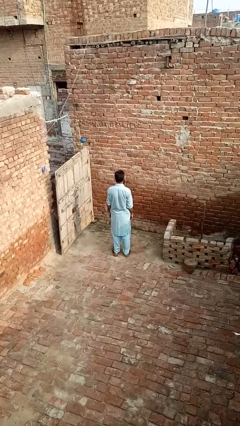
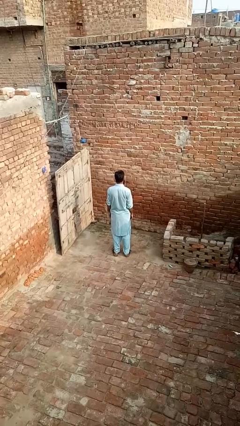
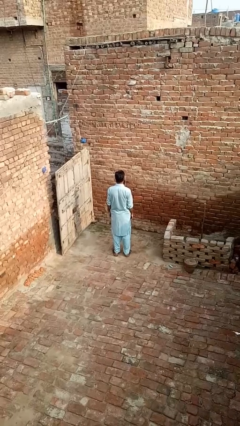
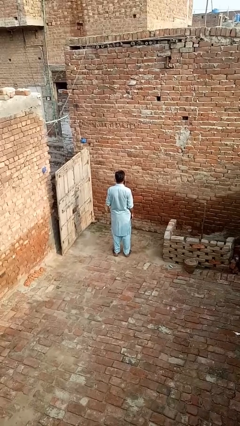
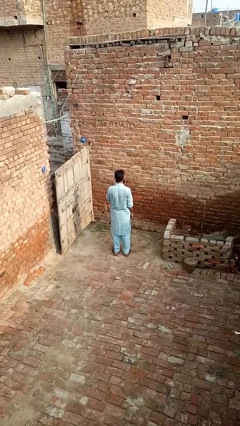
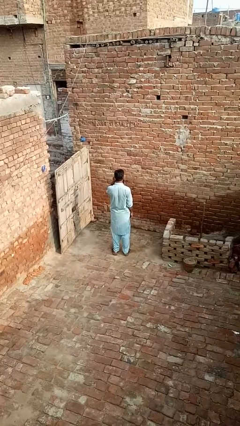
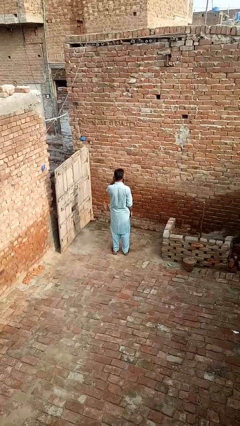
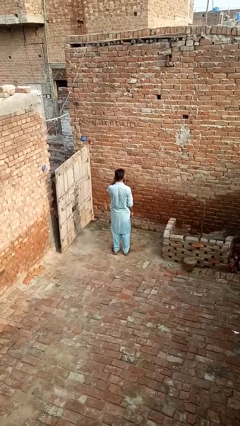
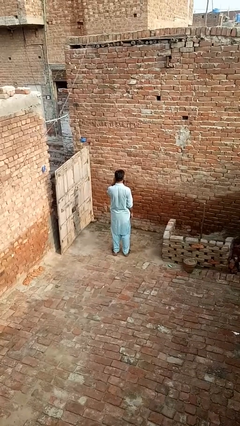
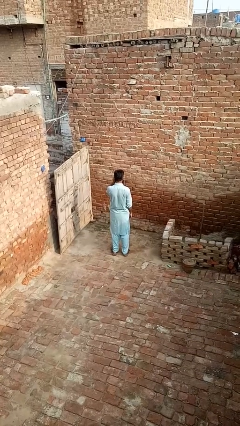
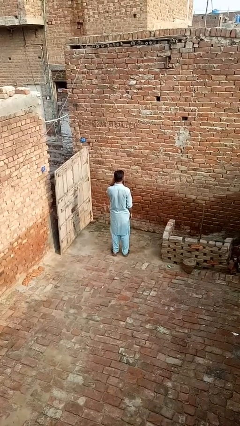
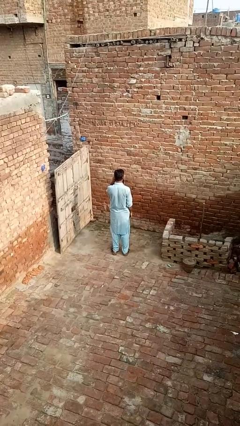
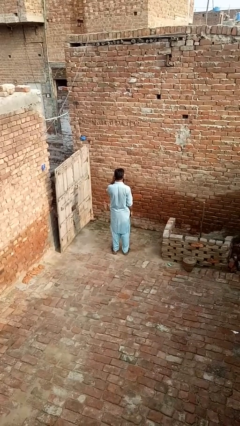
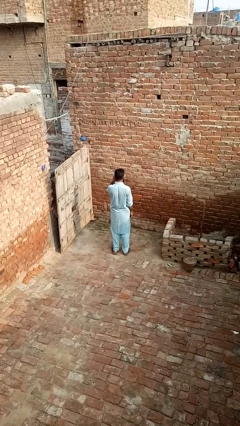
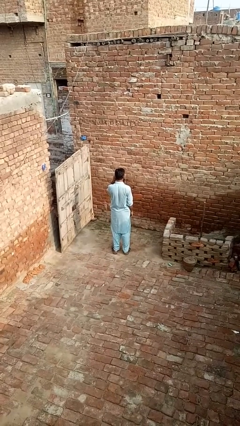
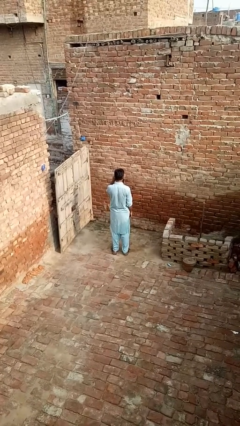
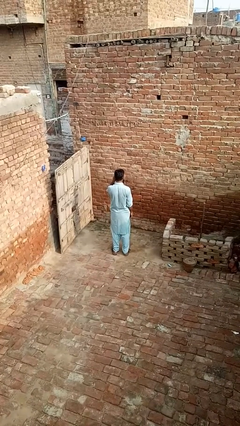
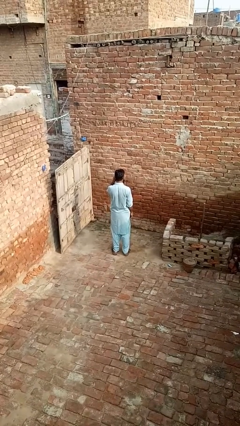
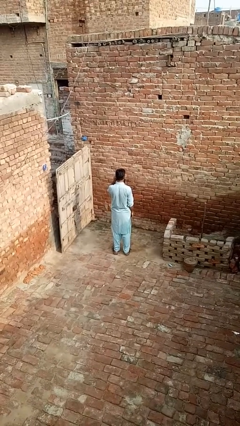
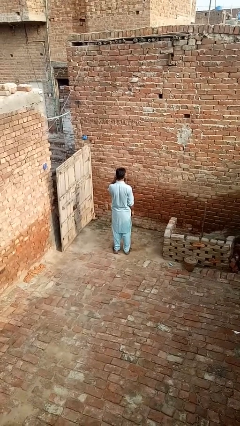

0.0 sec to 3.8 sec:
person touches earlobe

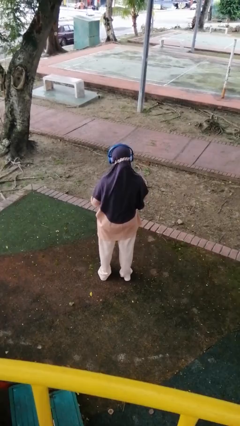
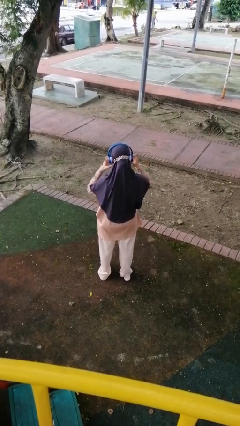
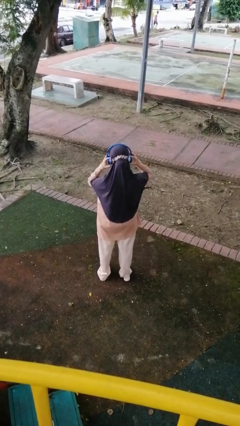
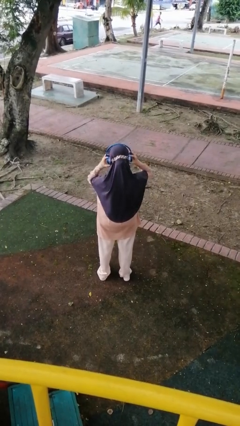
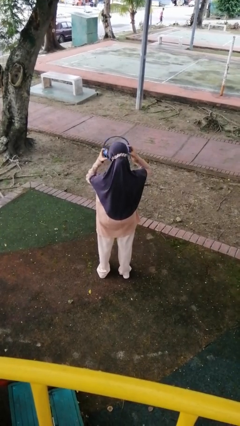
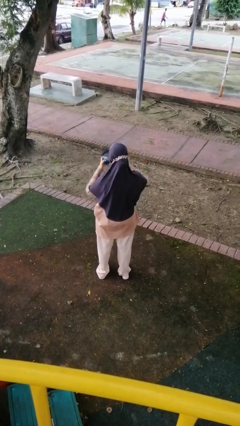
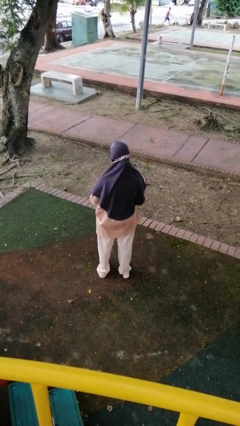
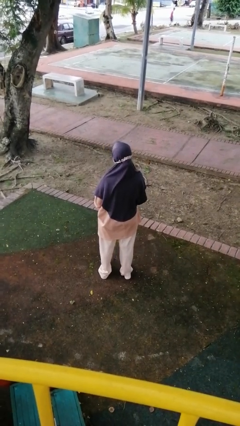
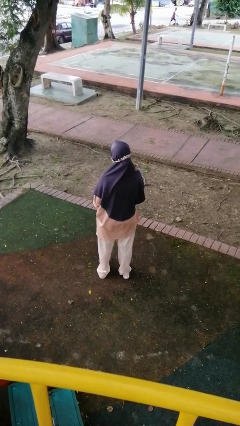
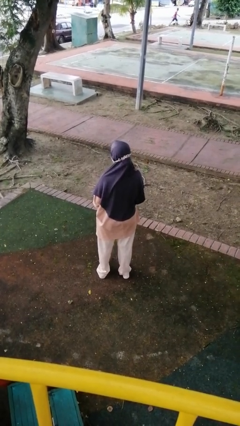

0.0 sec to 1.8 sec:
person takes off headphones

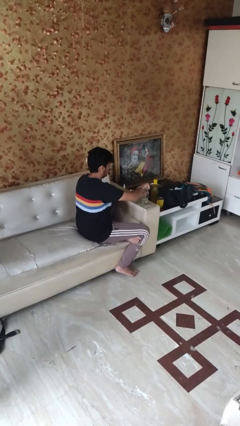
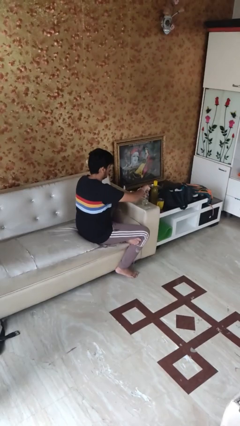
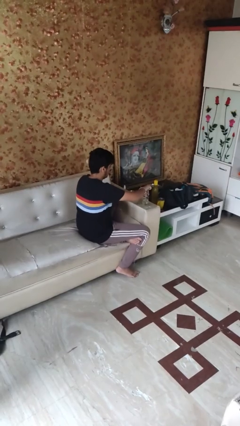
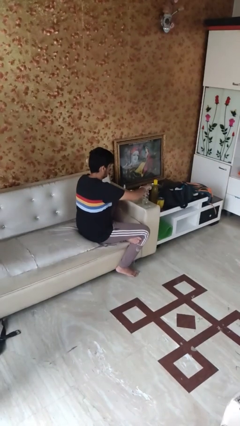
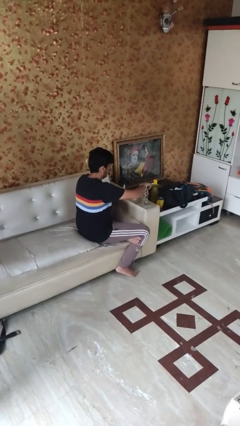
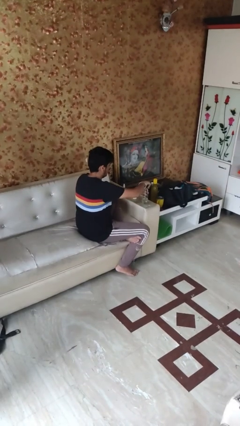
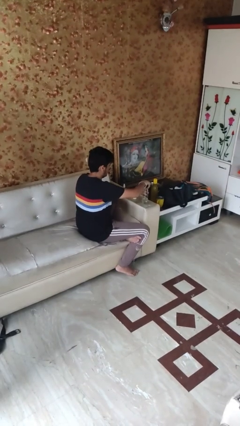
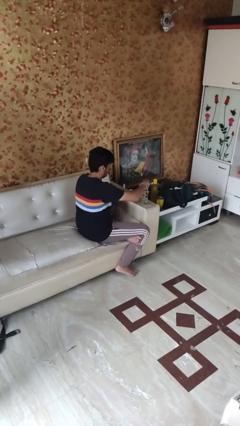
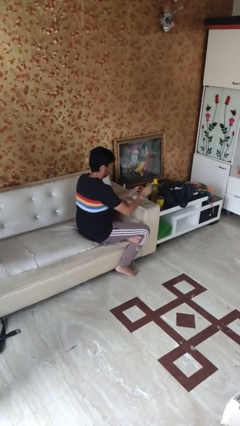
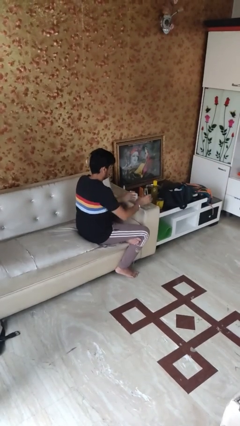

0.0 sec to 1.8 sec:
person unscrews lid from bottle

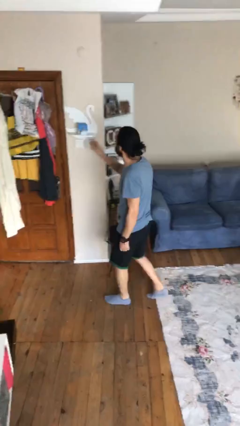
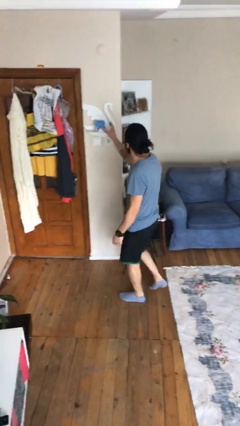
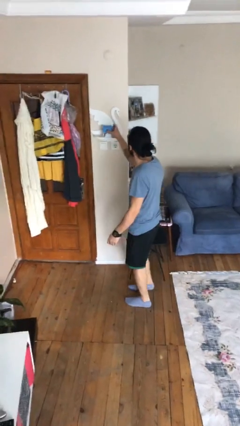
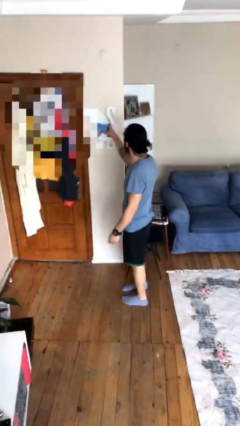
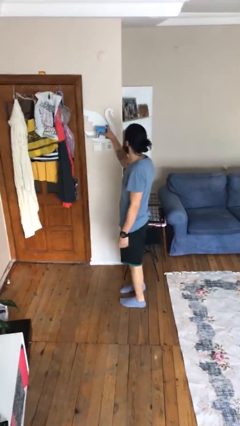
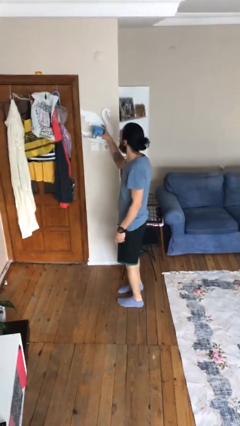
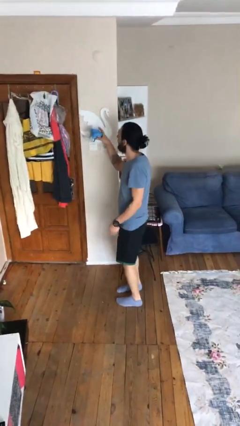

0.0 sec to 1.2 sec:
person picks up object from shelf

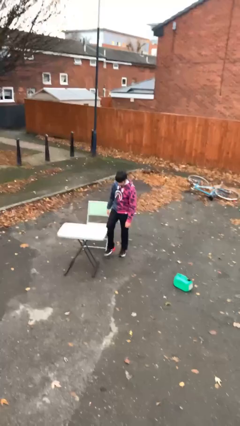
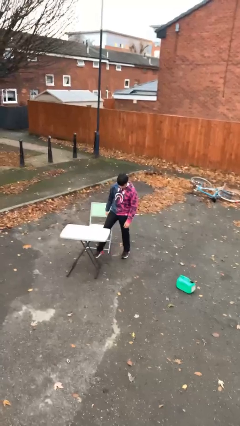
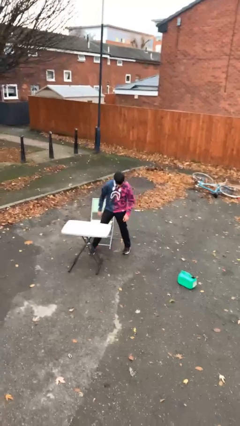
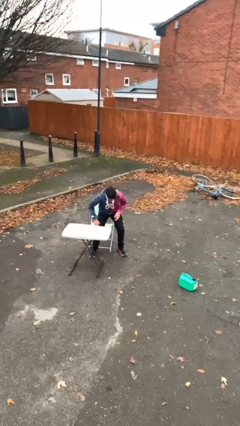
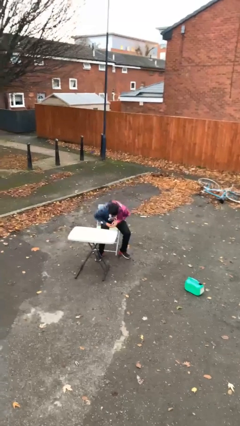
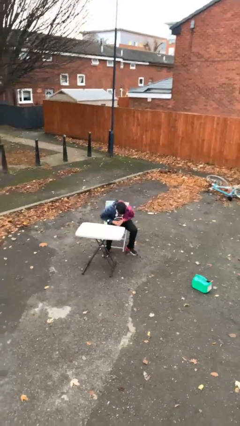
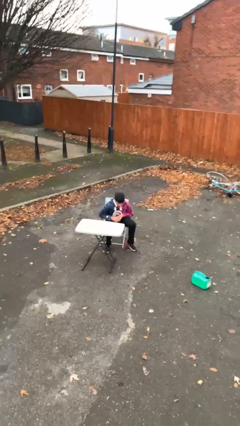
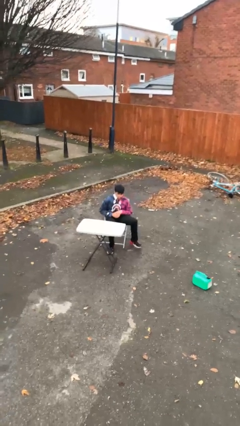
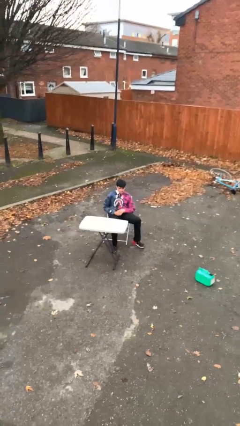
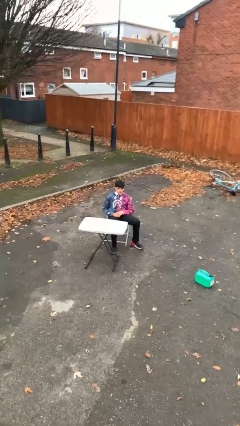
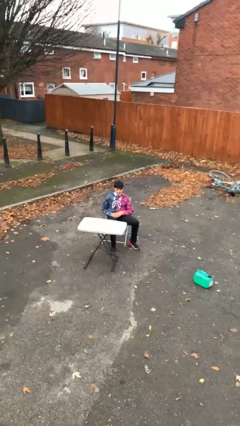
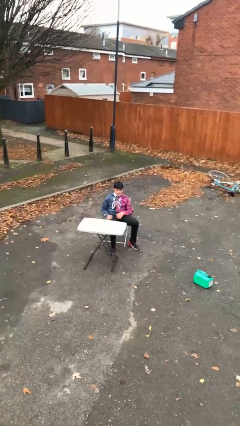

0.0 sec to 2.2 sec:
person sits down

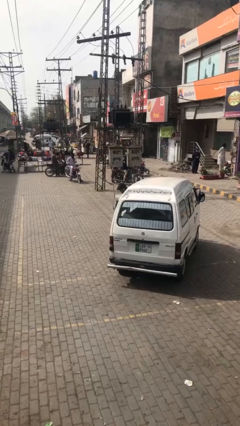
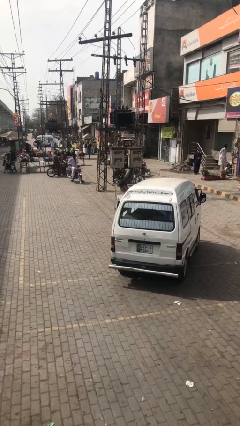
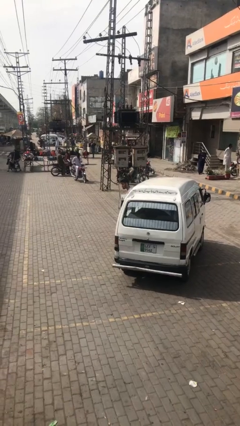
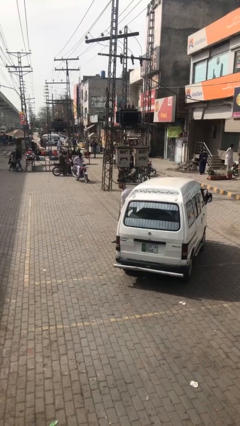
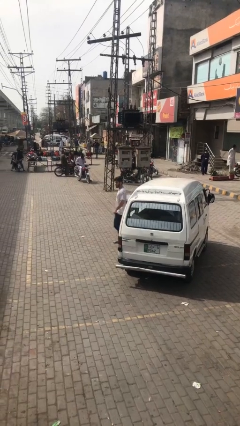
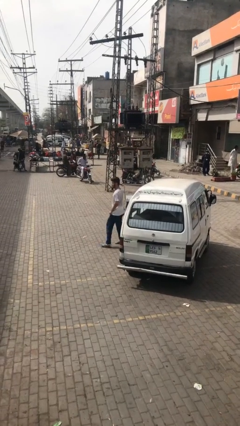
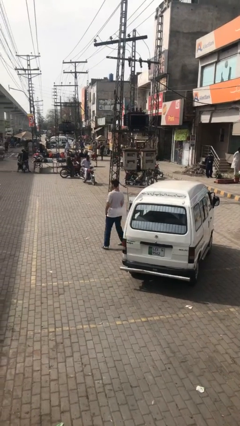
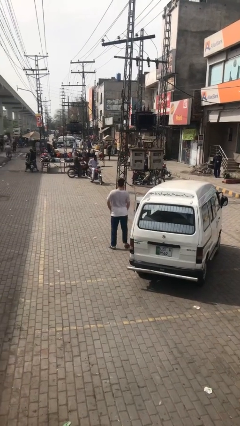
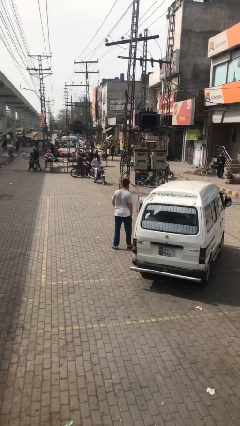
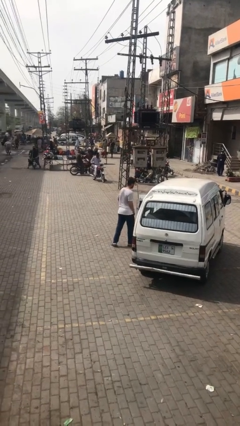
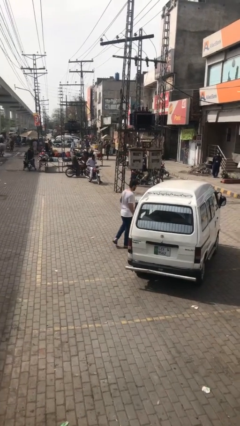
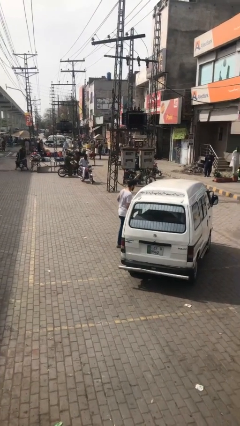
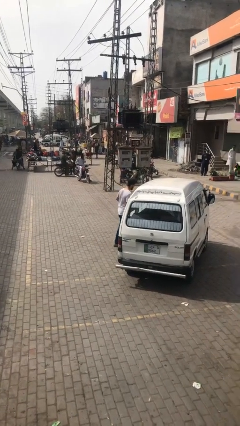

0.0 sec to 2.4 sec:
person exits car

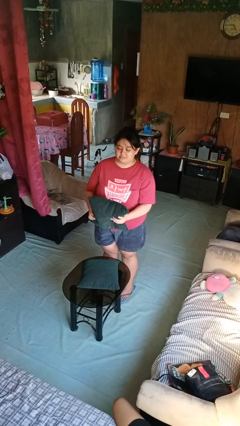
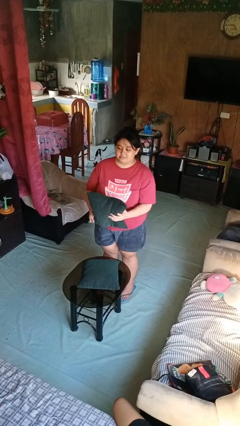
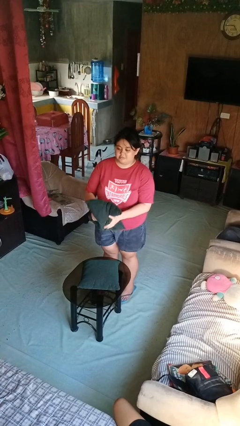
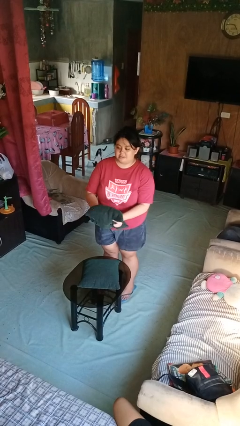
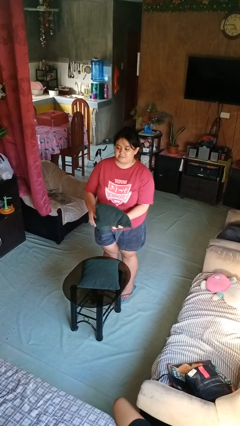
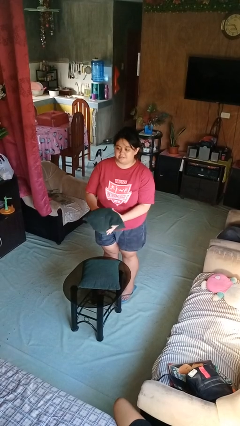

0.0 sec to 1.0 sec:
person squeezes object

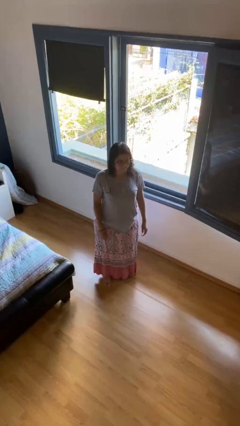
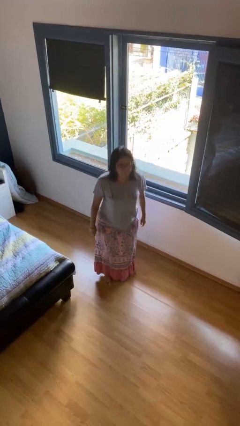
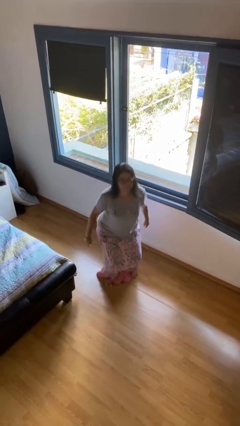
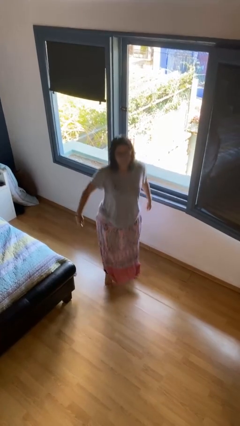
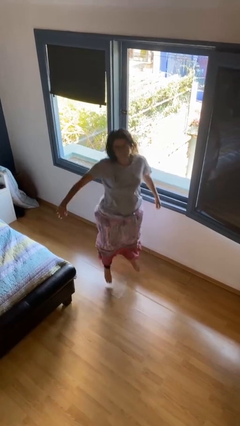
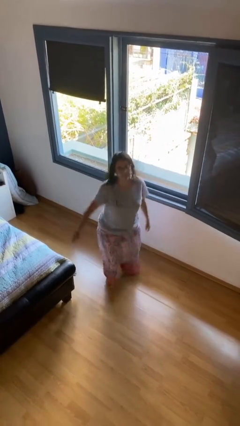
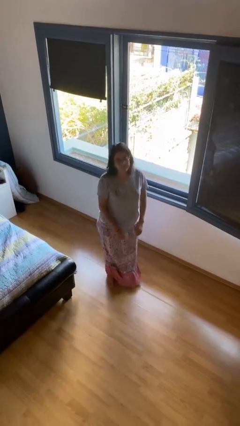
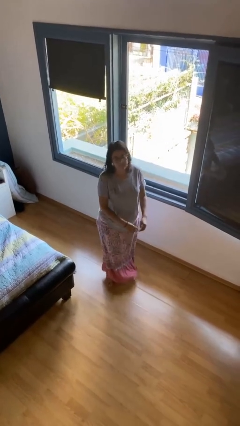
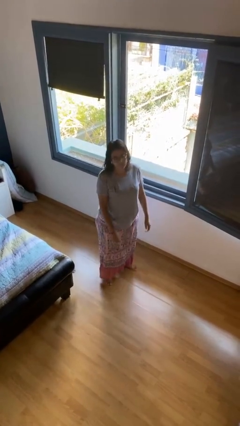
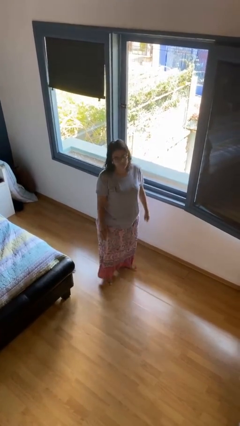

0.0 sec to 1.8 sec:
person jumps

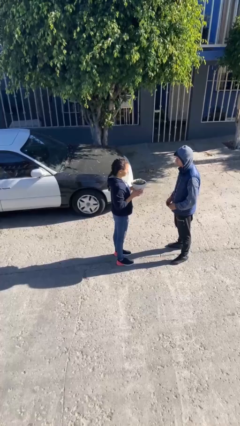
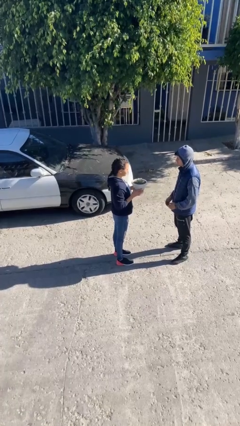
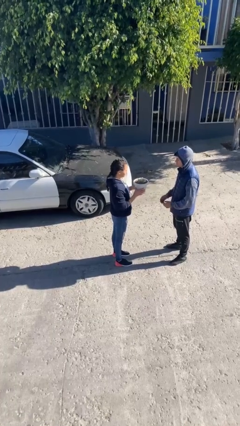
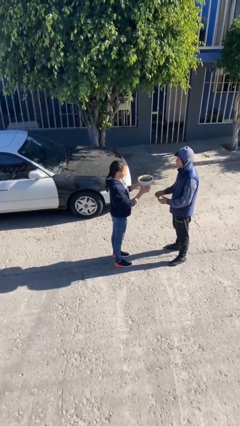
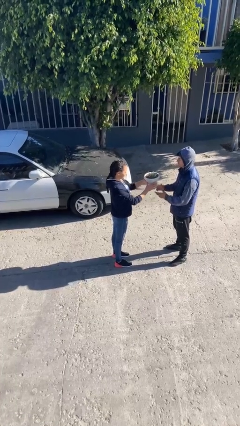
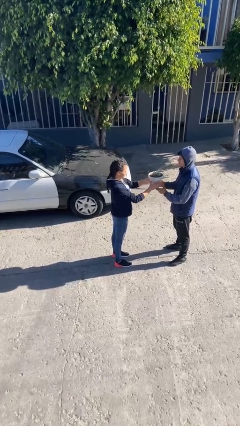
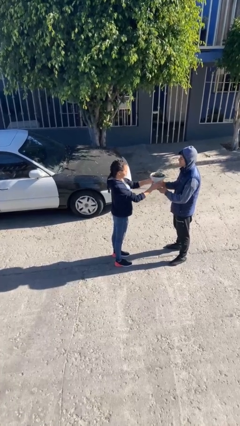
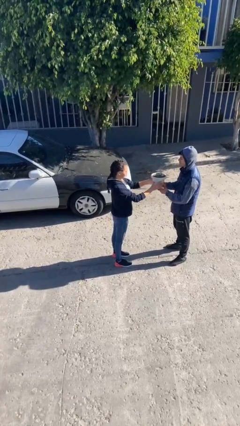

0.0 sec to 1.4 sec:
person transfers object to person
